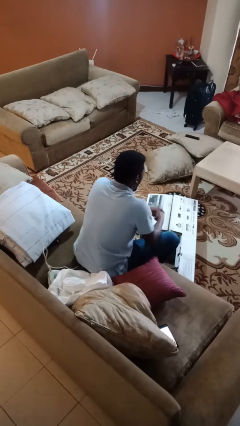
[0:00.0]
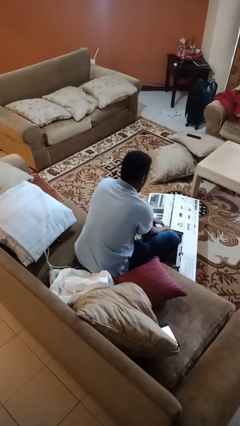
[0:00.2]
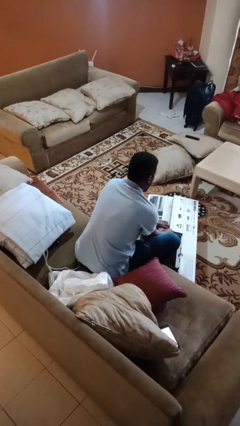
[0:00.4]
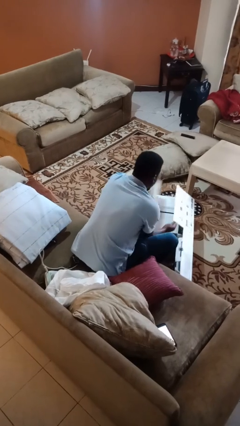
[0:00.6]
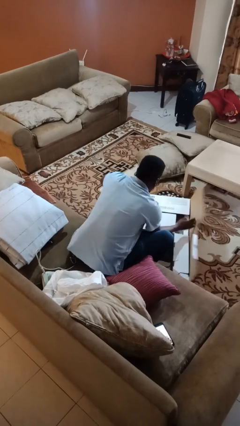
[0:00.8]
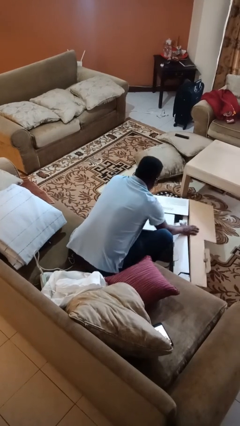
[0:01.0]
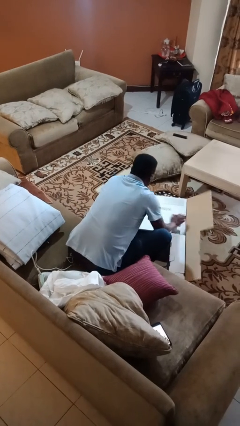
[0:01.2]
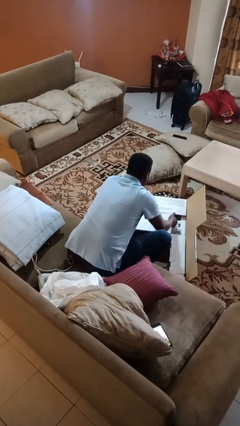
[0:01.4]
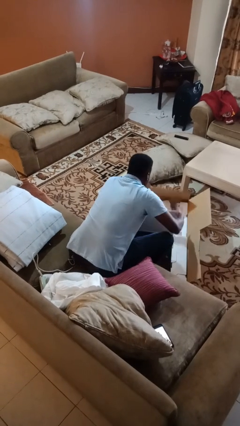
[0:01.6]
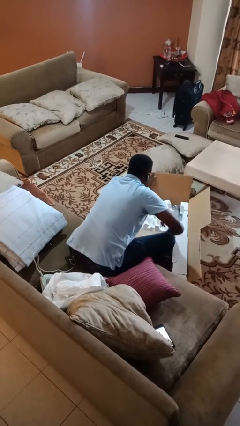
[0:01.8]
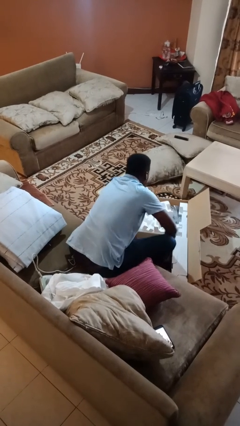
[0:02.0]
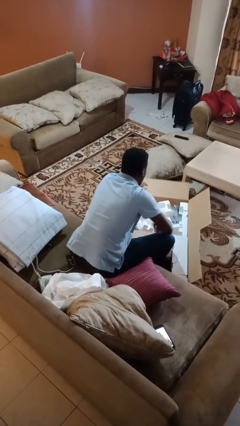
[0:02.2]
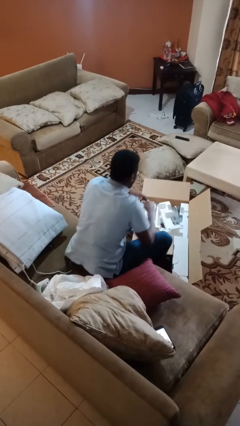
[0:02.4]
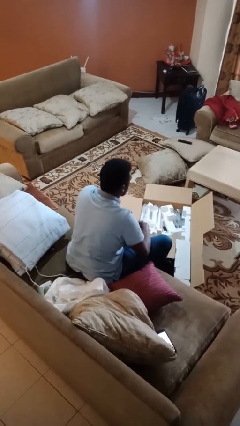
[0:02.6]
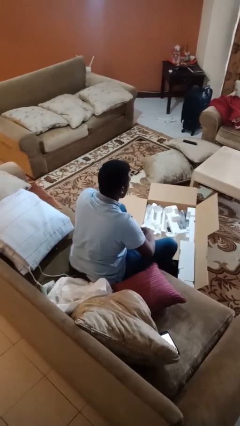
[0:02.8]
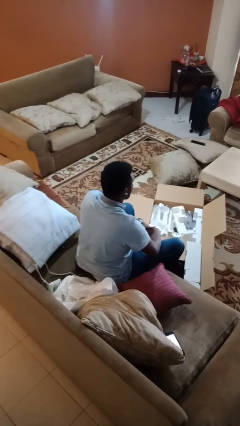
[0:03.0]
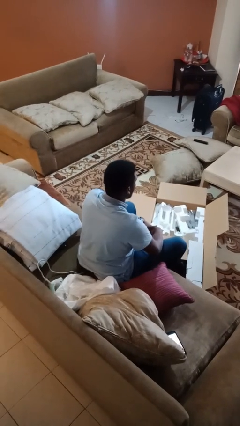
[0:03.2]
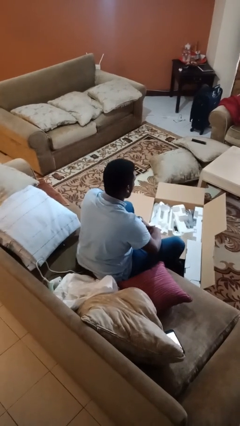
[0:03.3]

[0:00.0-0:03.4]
person opens box

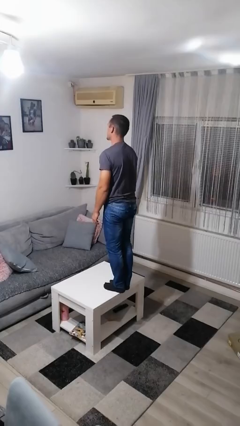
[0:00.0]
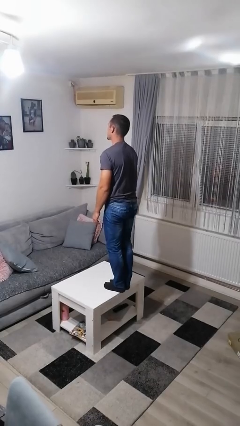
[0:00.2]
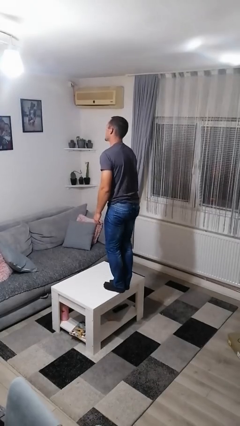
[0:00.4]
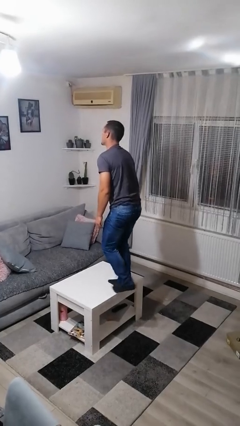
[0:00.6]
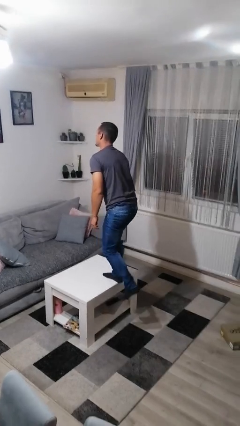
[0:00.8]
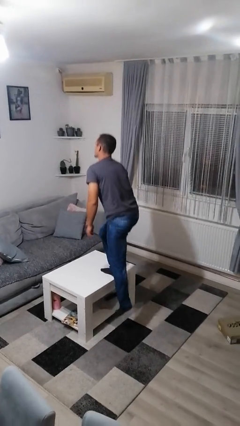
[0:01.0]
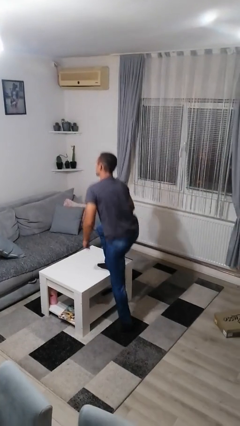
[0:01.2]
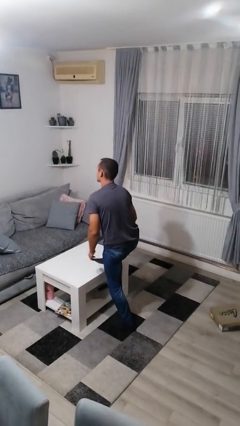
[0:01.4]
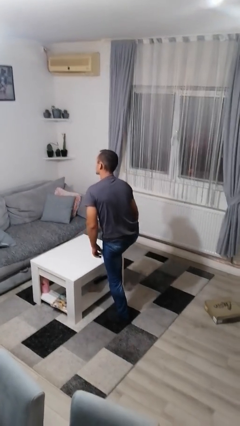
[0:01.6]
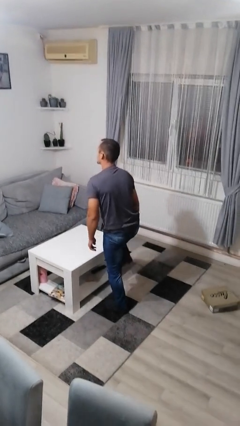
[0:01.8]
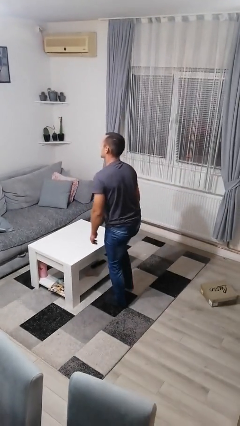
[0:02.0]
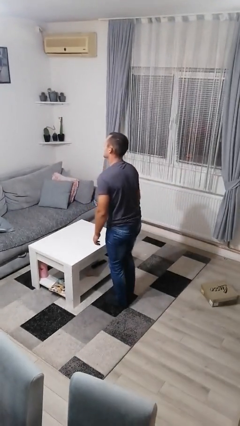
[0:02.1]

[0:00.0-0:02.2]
person climbs off table

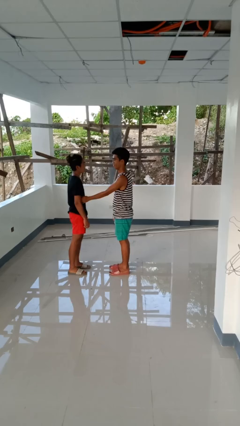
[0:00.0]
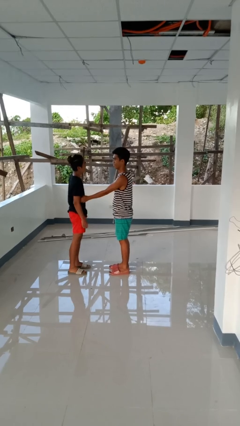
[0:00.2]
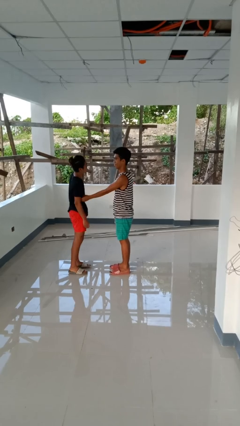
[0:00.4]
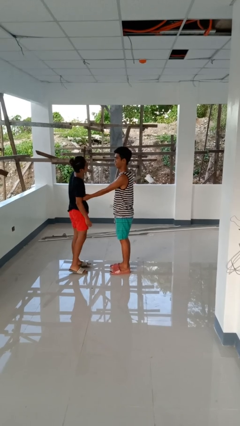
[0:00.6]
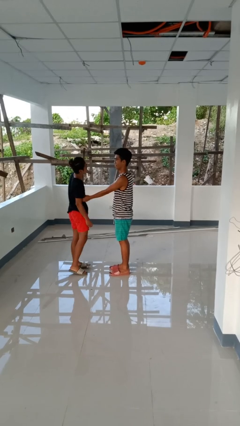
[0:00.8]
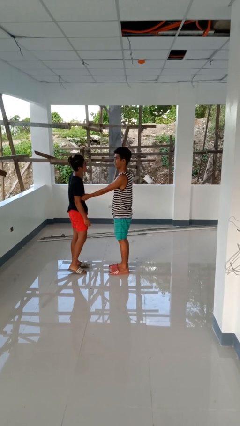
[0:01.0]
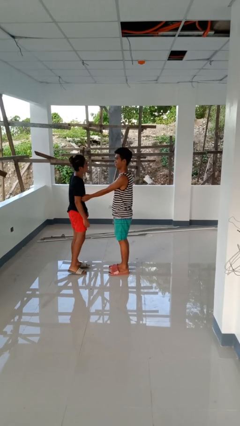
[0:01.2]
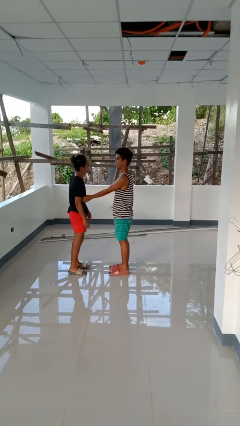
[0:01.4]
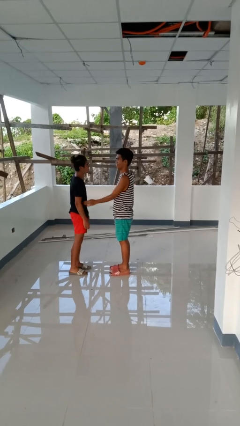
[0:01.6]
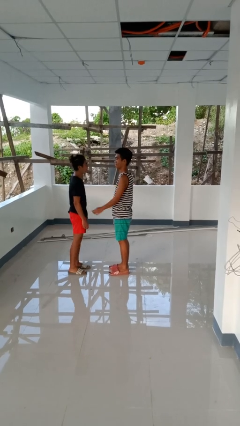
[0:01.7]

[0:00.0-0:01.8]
person tickles person

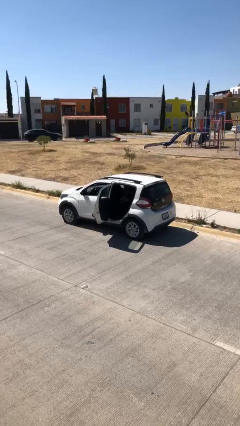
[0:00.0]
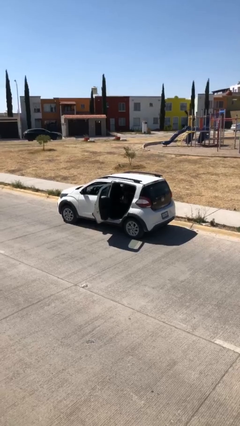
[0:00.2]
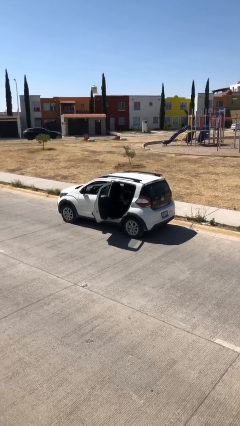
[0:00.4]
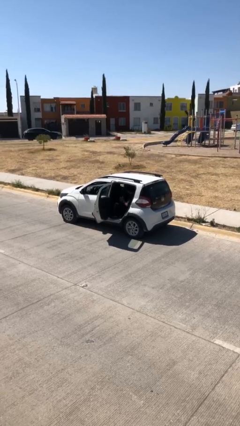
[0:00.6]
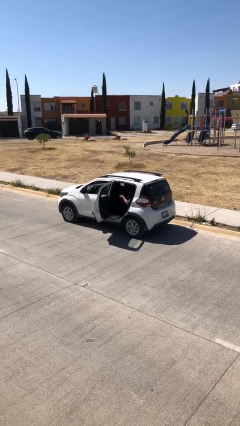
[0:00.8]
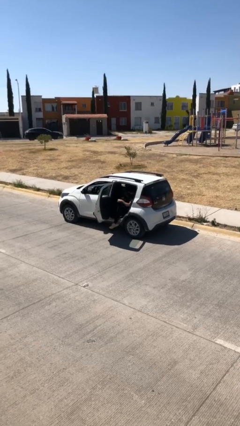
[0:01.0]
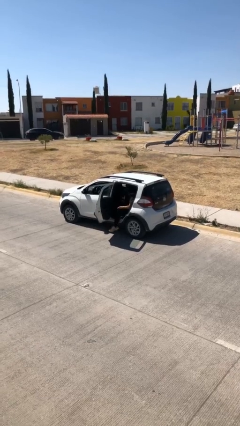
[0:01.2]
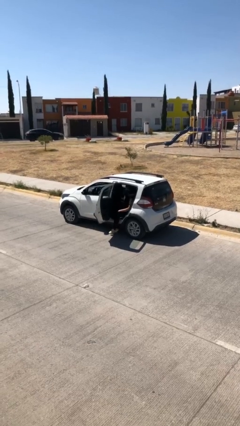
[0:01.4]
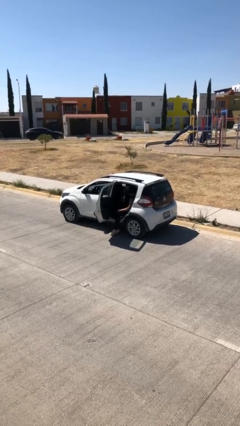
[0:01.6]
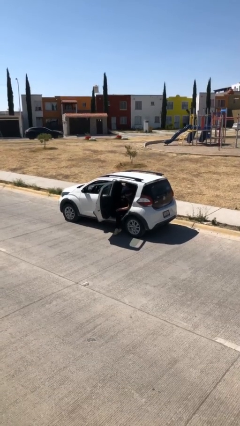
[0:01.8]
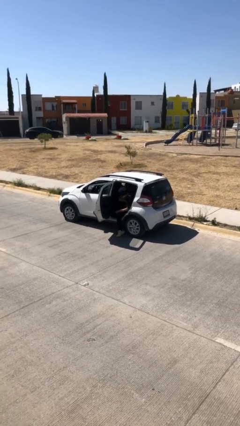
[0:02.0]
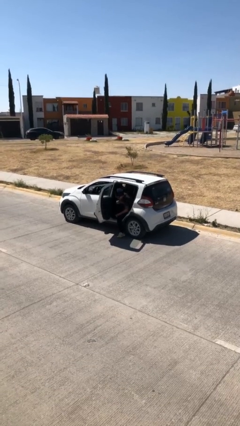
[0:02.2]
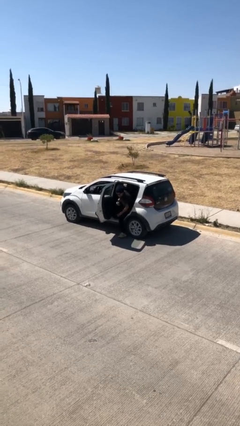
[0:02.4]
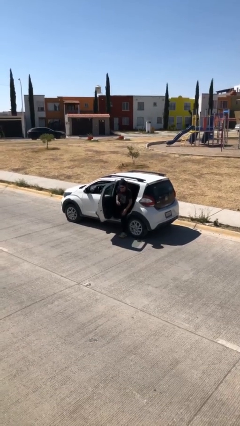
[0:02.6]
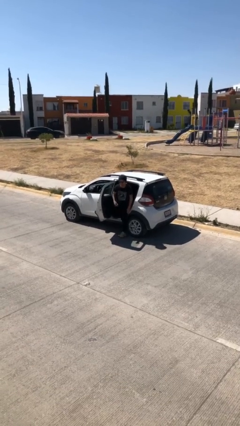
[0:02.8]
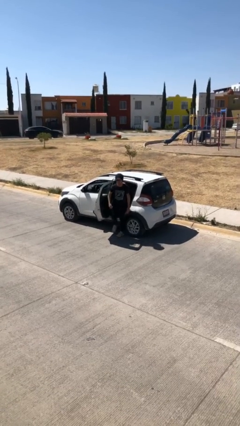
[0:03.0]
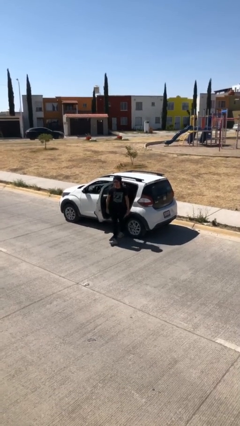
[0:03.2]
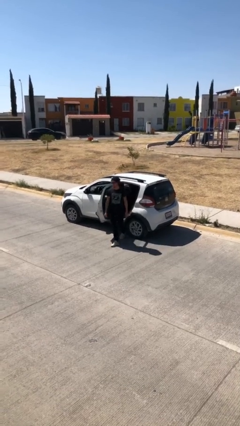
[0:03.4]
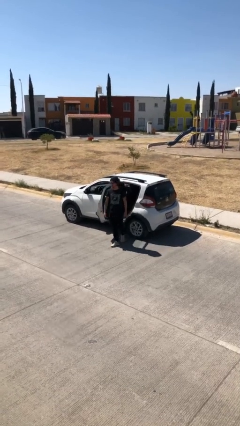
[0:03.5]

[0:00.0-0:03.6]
person exits car

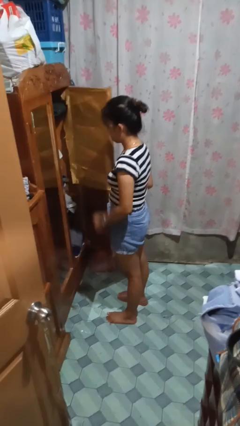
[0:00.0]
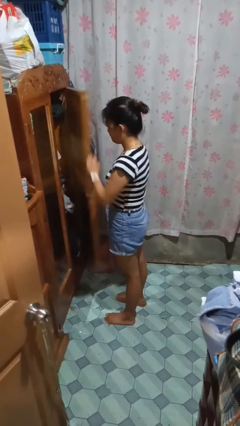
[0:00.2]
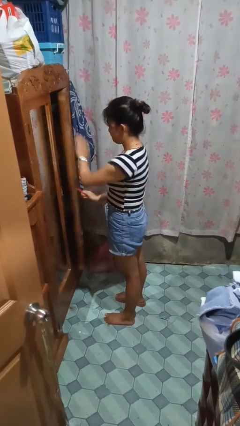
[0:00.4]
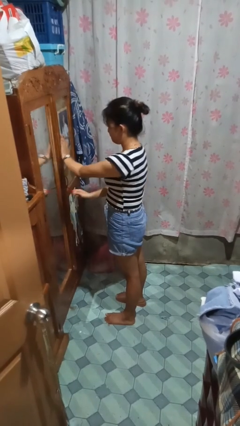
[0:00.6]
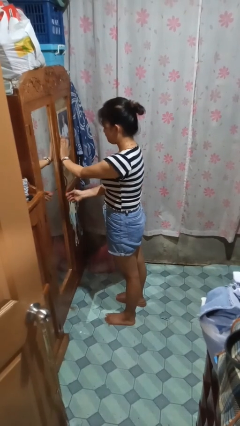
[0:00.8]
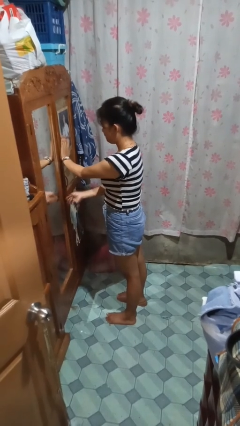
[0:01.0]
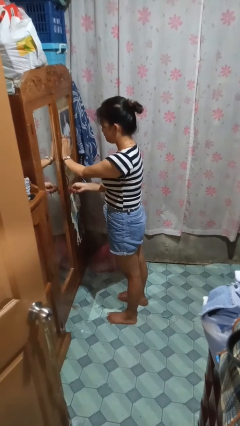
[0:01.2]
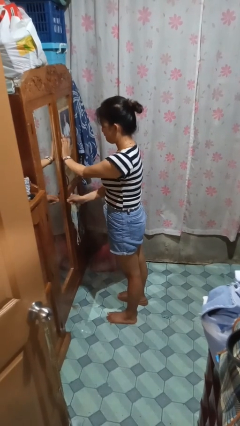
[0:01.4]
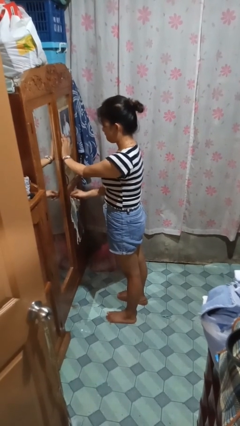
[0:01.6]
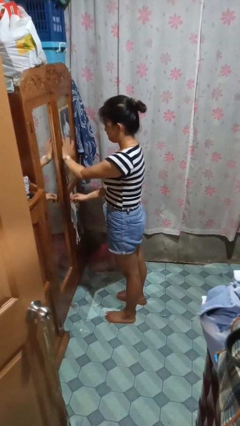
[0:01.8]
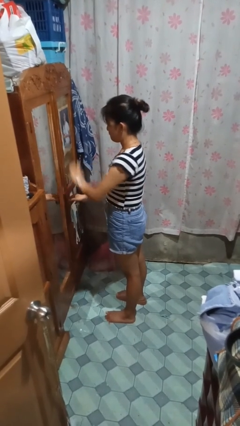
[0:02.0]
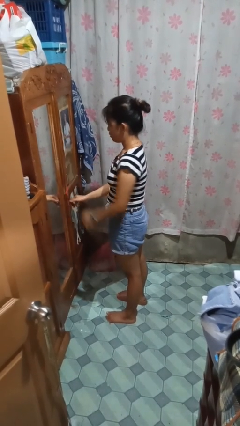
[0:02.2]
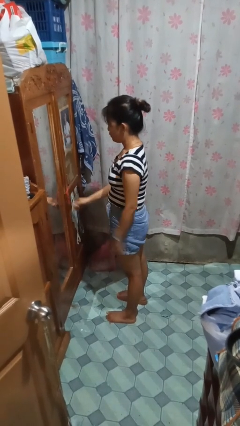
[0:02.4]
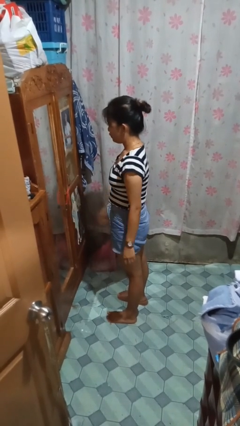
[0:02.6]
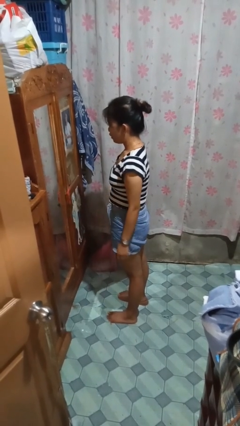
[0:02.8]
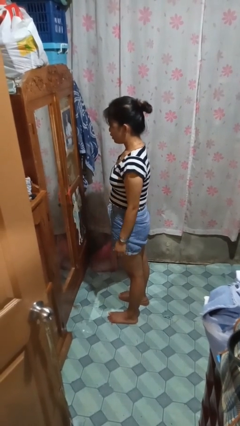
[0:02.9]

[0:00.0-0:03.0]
person closes closet door

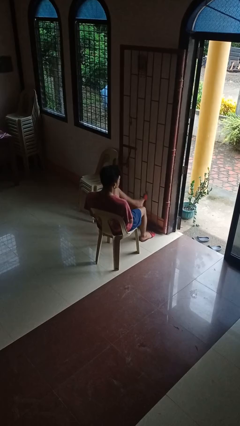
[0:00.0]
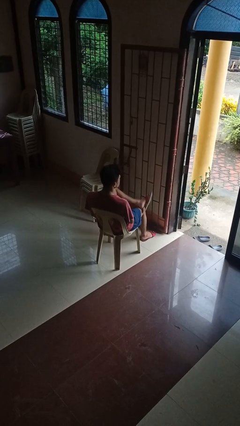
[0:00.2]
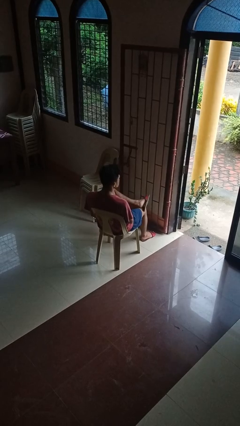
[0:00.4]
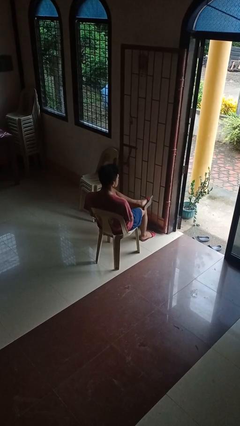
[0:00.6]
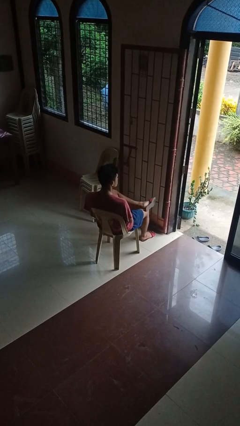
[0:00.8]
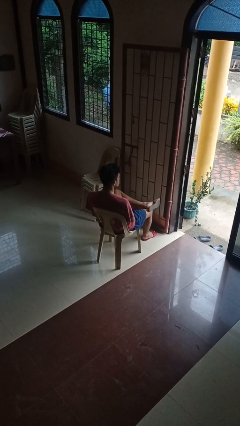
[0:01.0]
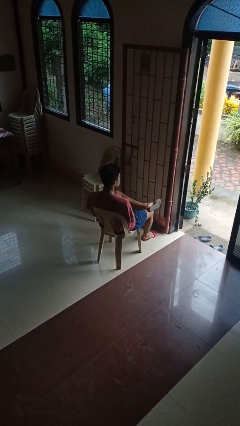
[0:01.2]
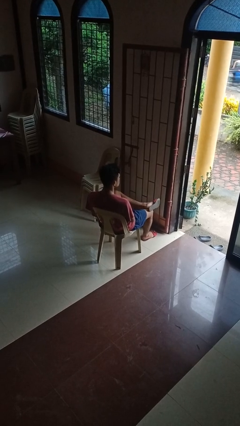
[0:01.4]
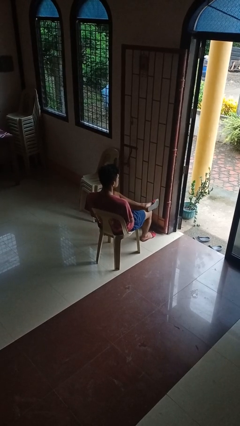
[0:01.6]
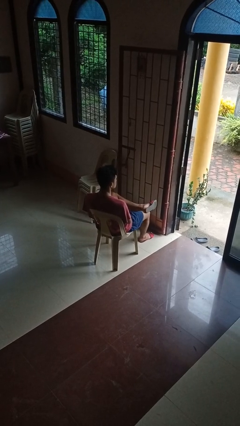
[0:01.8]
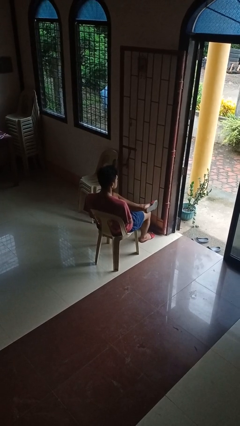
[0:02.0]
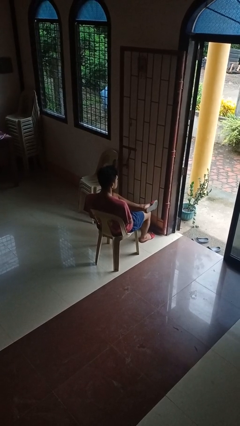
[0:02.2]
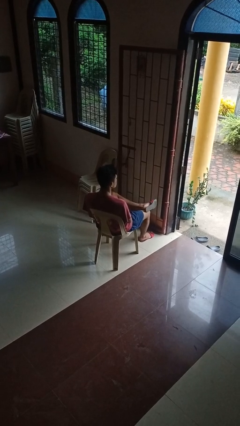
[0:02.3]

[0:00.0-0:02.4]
person crosses legs

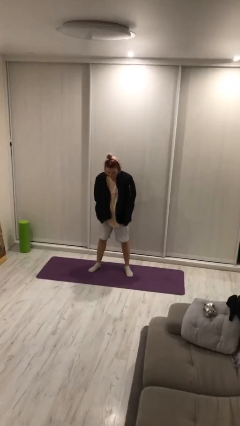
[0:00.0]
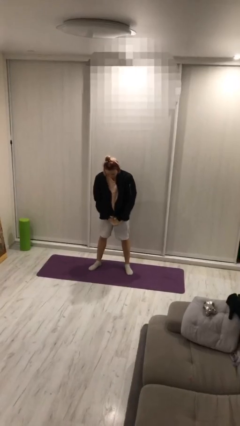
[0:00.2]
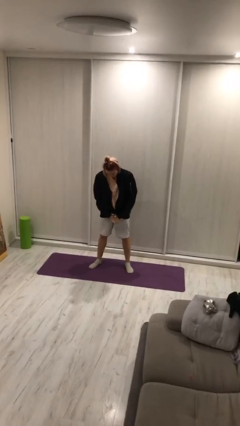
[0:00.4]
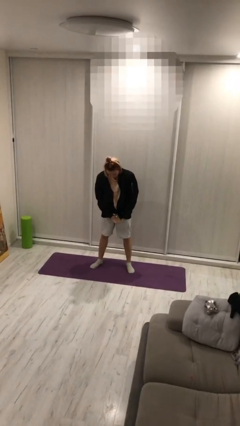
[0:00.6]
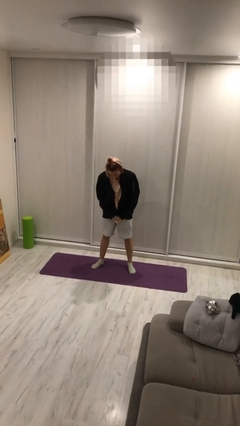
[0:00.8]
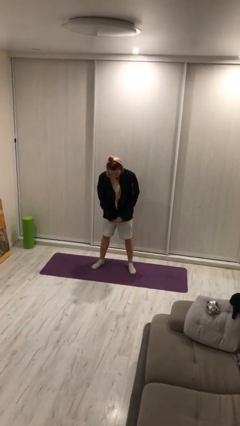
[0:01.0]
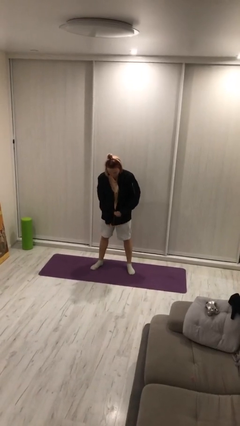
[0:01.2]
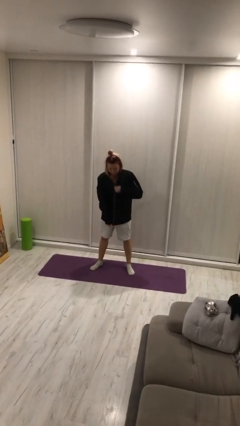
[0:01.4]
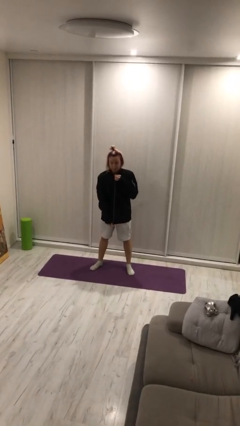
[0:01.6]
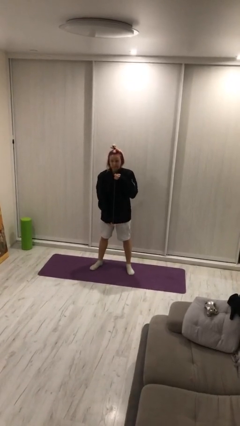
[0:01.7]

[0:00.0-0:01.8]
person zips up jacket
